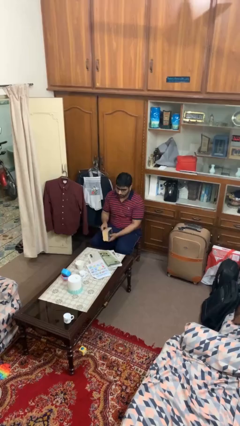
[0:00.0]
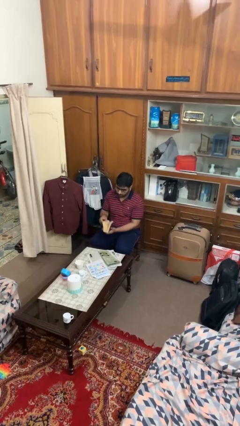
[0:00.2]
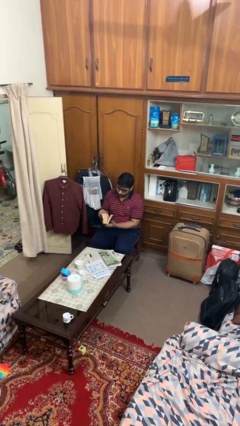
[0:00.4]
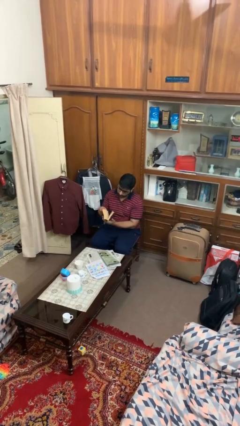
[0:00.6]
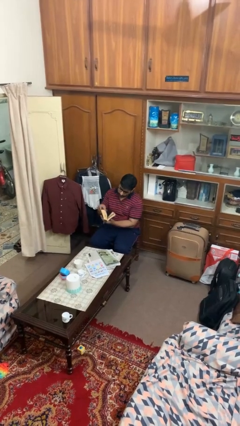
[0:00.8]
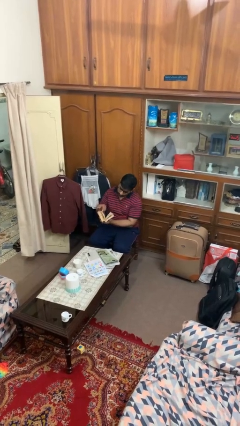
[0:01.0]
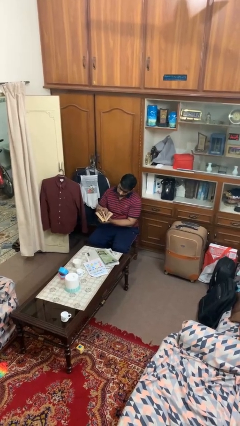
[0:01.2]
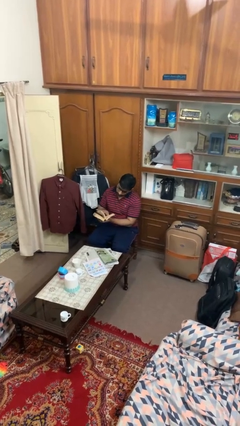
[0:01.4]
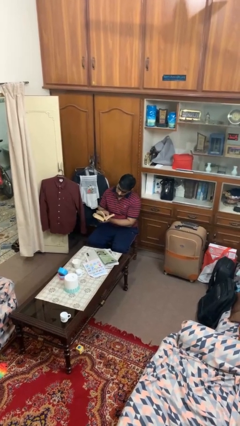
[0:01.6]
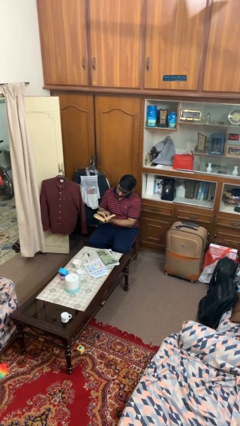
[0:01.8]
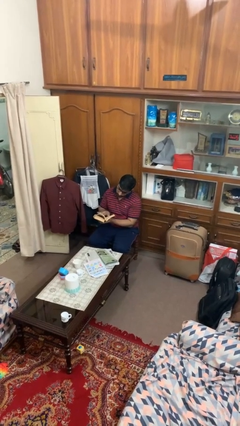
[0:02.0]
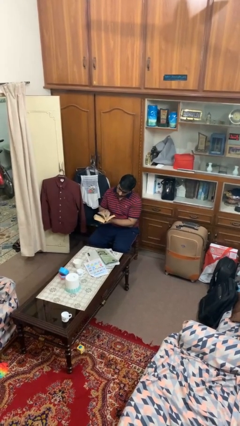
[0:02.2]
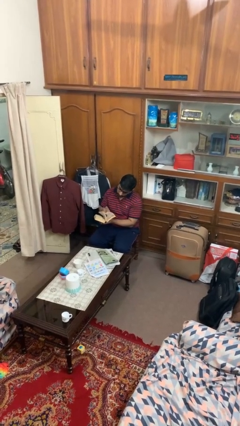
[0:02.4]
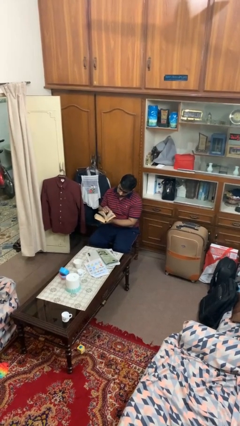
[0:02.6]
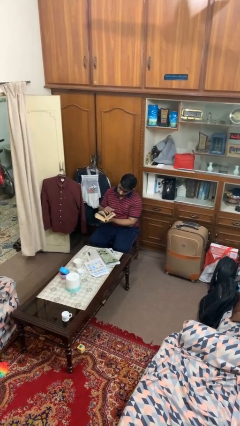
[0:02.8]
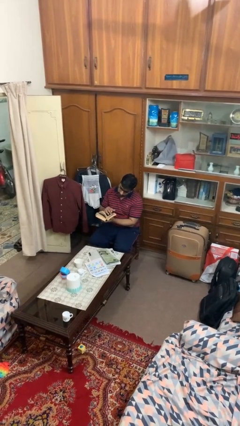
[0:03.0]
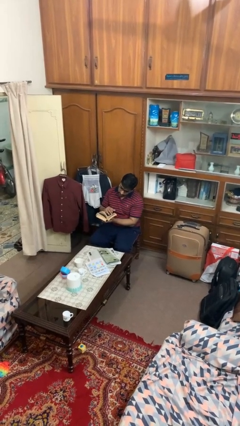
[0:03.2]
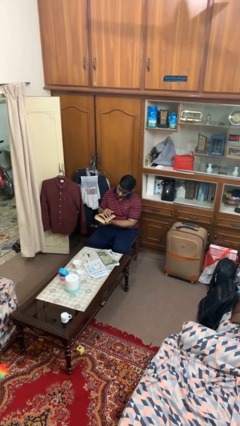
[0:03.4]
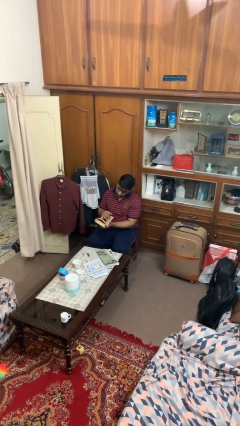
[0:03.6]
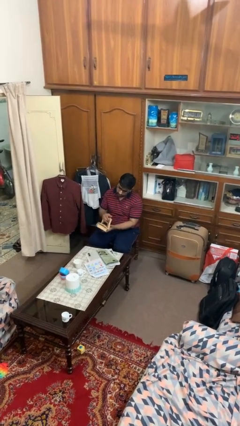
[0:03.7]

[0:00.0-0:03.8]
person reads book

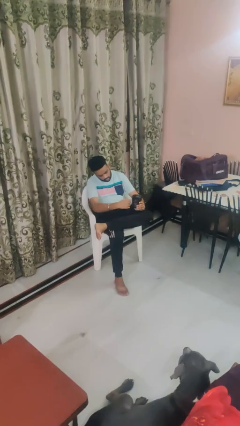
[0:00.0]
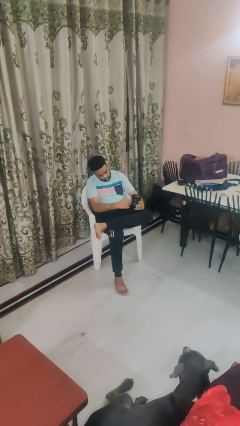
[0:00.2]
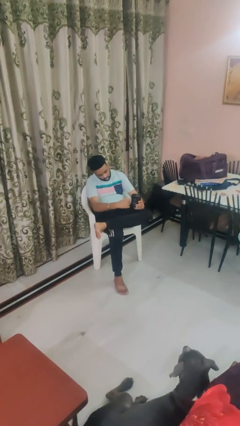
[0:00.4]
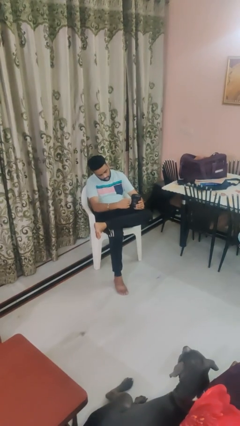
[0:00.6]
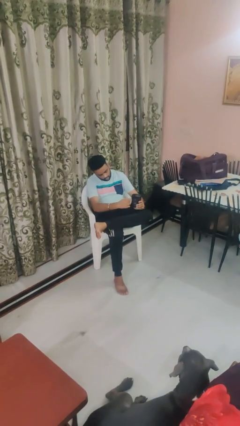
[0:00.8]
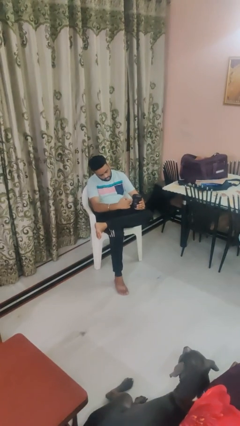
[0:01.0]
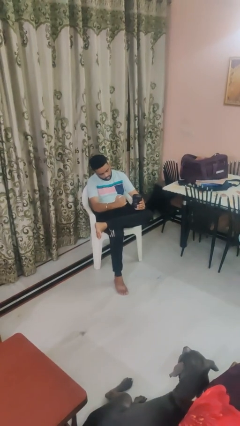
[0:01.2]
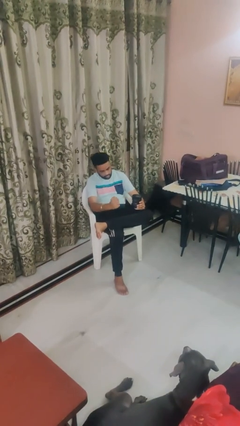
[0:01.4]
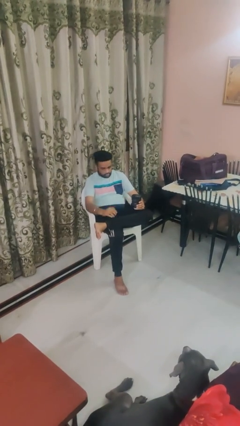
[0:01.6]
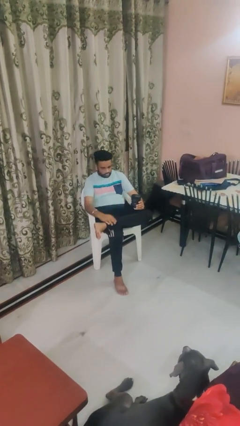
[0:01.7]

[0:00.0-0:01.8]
person taps object with finger

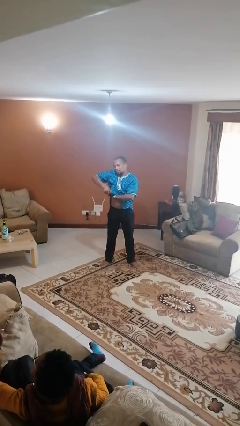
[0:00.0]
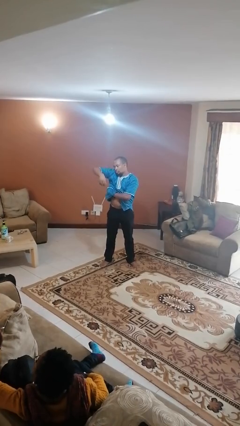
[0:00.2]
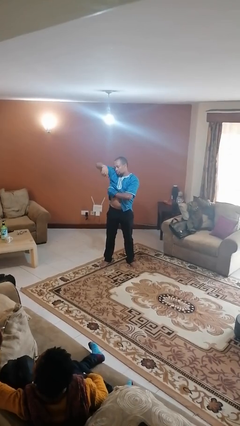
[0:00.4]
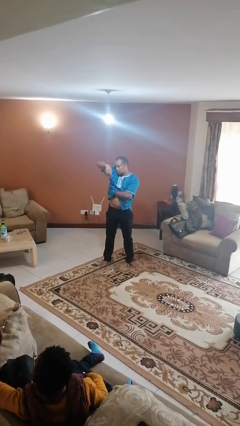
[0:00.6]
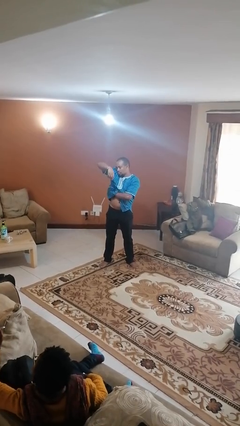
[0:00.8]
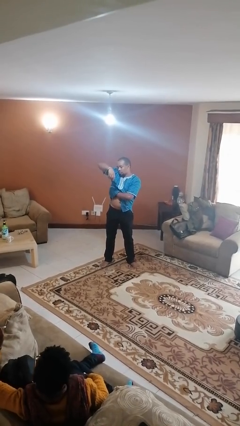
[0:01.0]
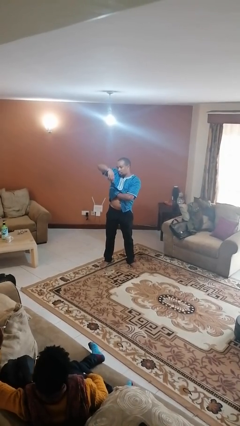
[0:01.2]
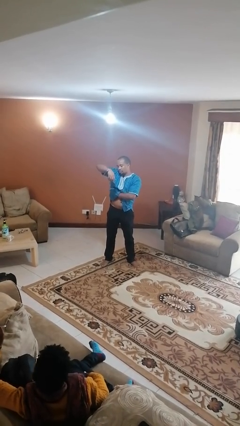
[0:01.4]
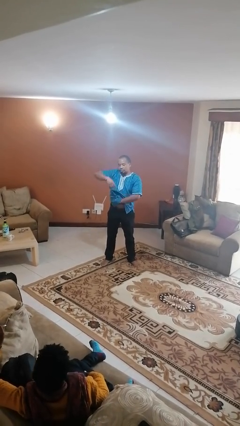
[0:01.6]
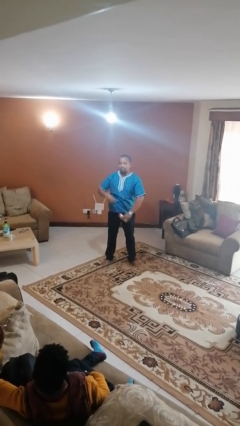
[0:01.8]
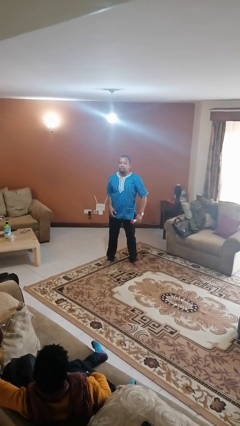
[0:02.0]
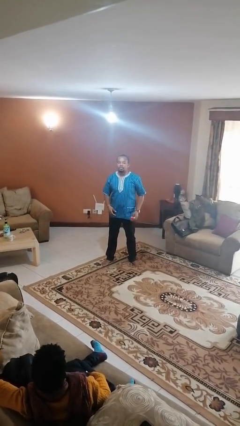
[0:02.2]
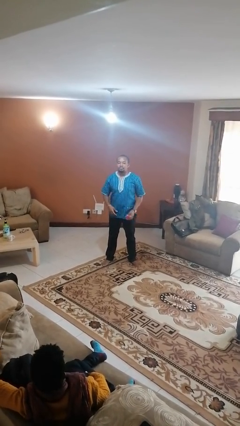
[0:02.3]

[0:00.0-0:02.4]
person applies deodorant

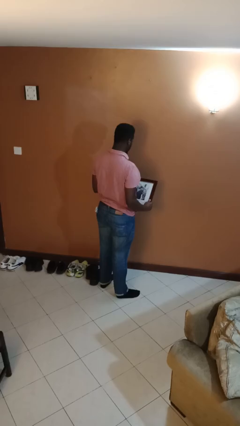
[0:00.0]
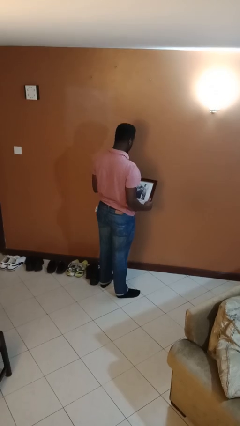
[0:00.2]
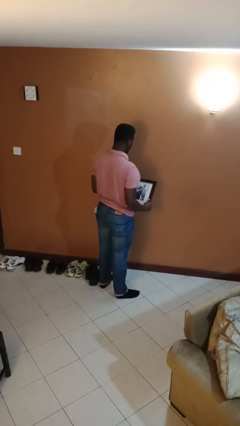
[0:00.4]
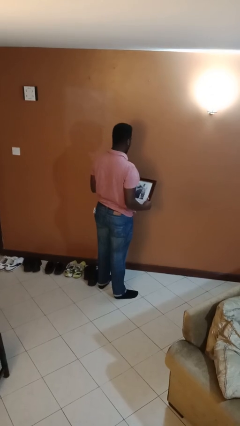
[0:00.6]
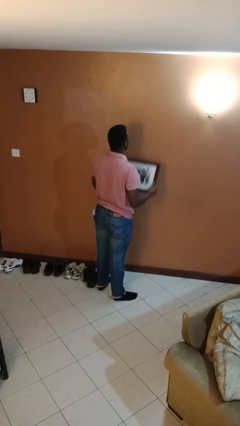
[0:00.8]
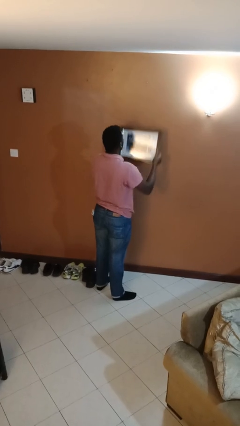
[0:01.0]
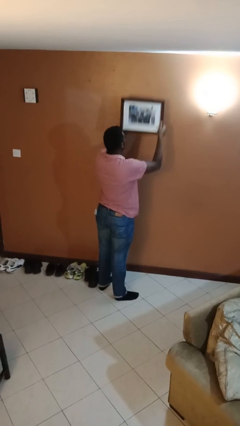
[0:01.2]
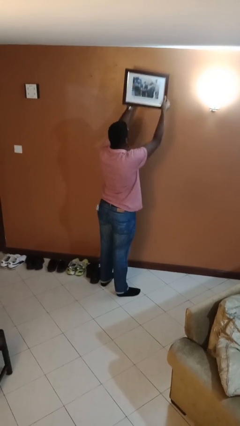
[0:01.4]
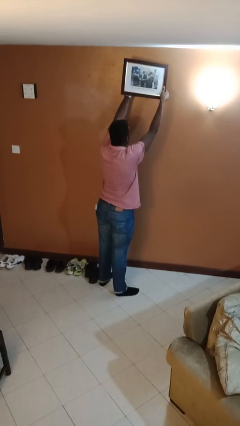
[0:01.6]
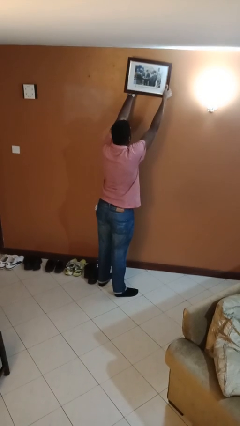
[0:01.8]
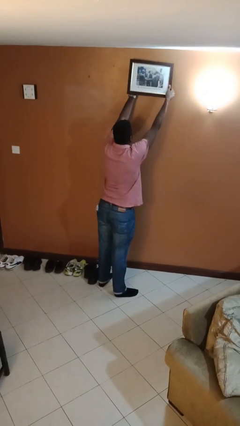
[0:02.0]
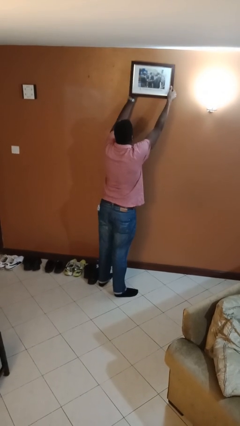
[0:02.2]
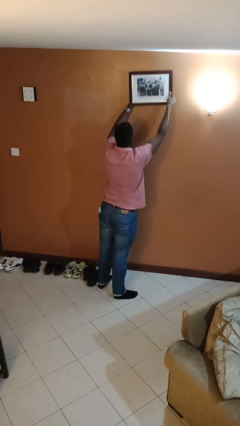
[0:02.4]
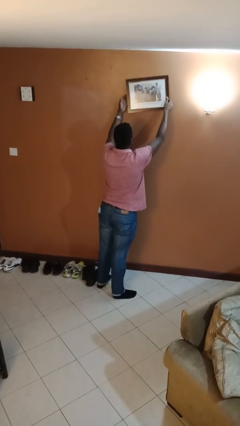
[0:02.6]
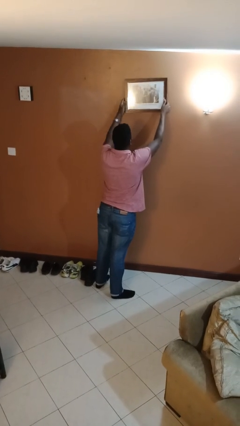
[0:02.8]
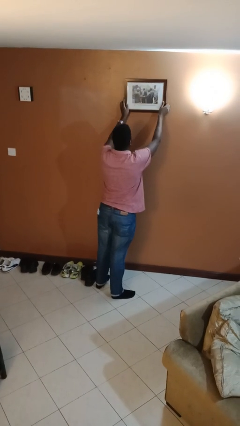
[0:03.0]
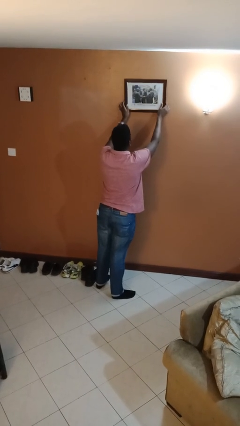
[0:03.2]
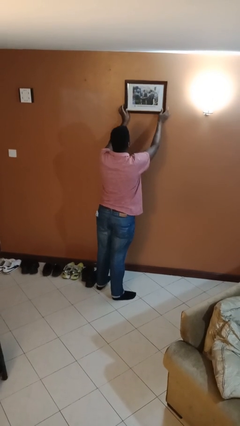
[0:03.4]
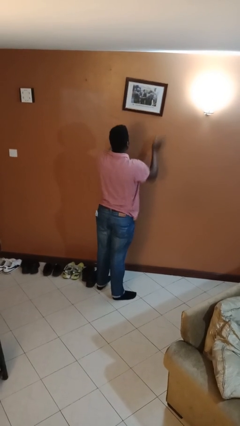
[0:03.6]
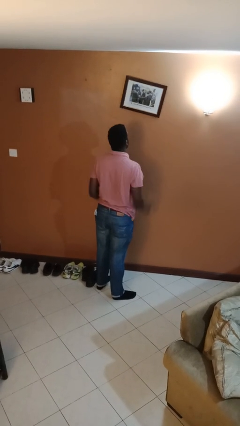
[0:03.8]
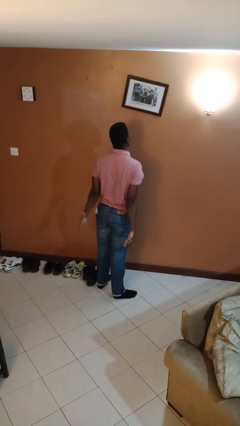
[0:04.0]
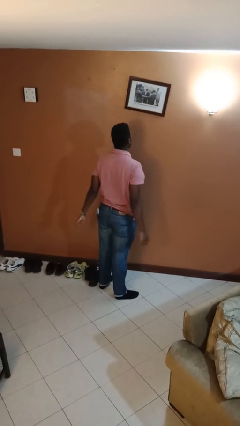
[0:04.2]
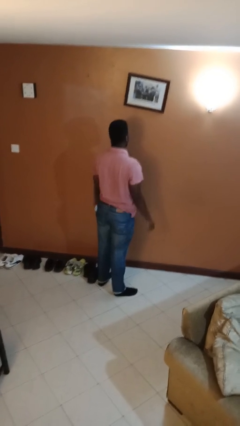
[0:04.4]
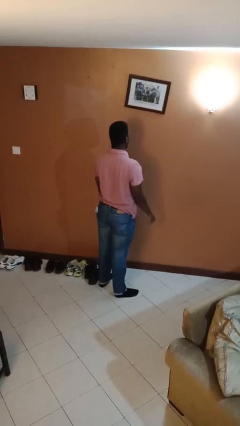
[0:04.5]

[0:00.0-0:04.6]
person puts up picture frame

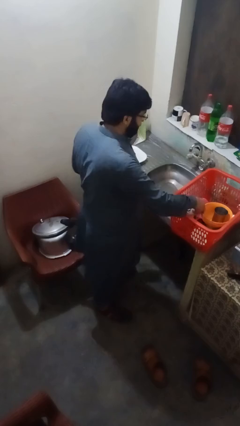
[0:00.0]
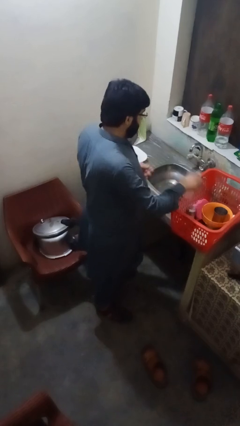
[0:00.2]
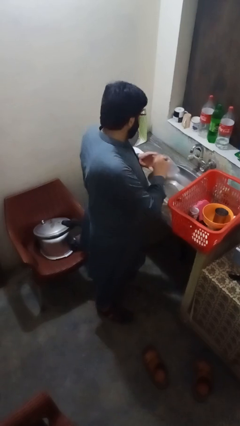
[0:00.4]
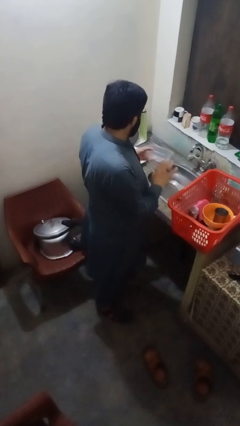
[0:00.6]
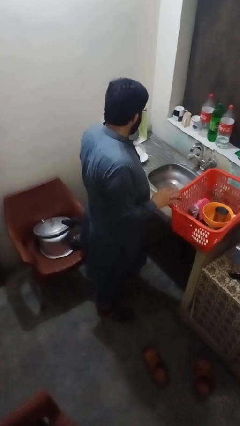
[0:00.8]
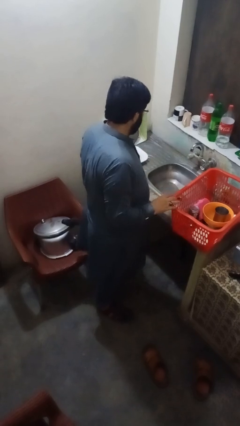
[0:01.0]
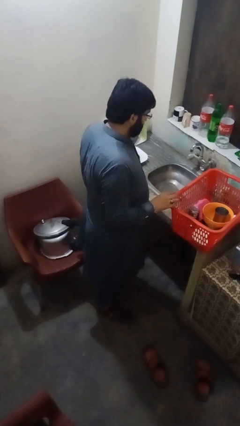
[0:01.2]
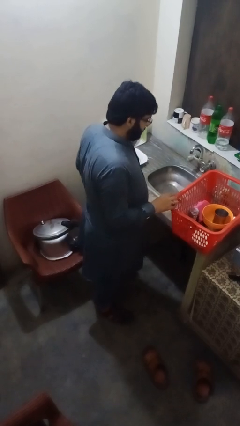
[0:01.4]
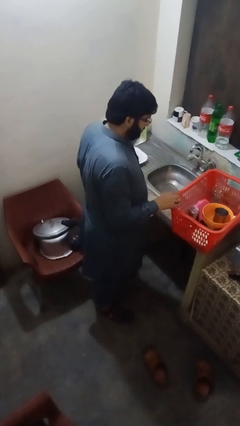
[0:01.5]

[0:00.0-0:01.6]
person unloads dishwasher

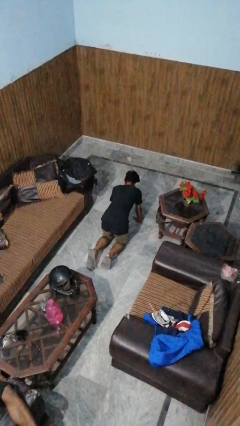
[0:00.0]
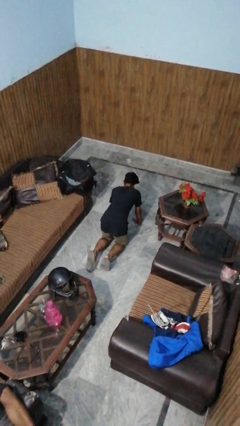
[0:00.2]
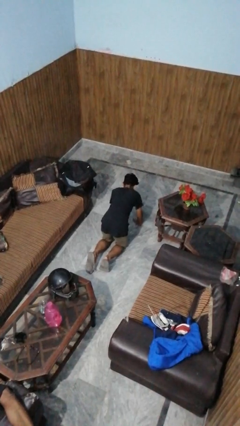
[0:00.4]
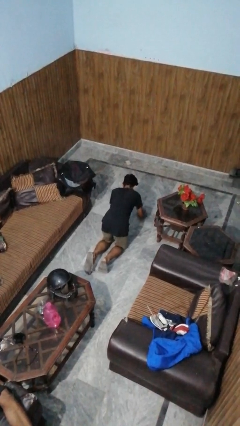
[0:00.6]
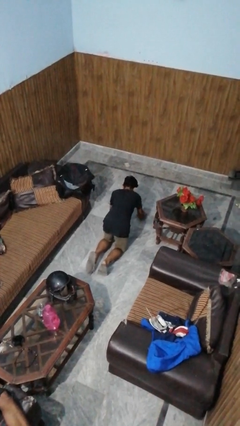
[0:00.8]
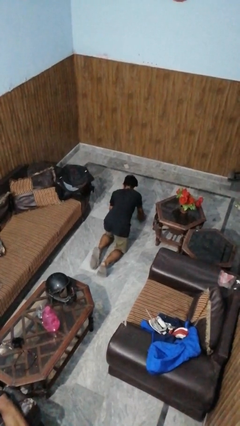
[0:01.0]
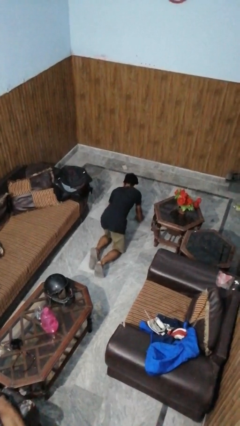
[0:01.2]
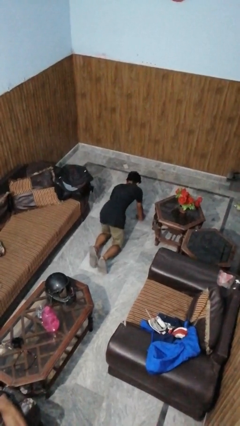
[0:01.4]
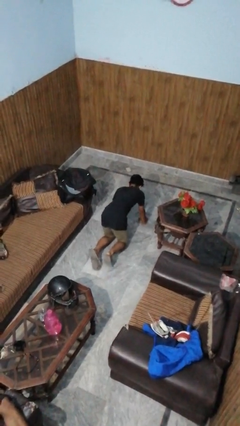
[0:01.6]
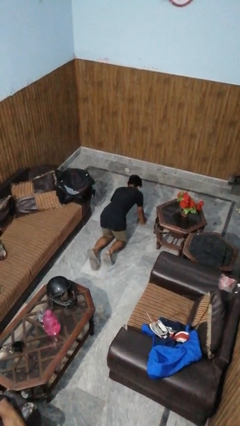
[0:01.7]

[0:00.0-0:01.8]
person crawls

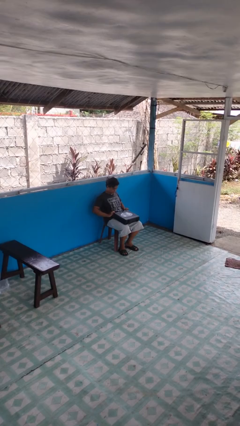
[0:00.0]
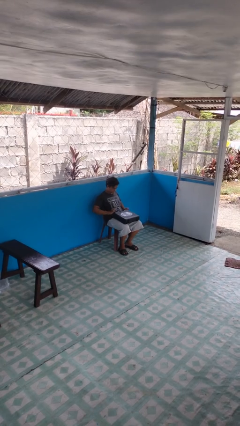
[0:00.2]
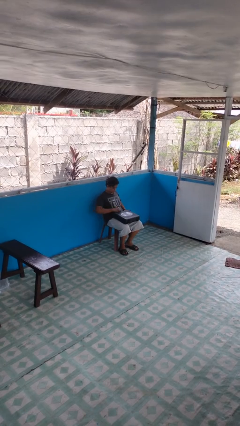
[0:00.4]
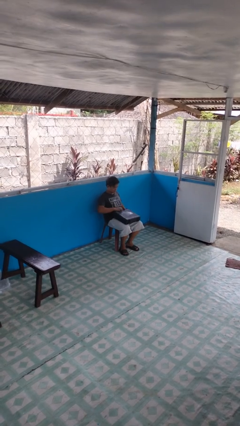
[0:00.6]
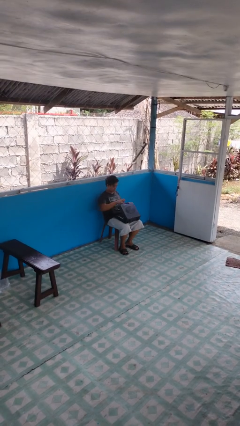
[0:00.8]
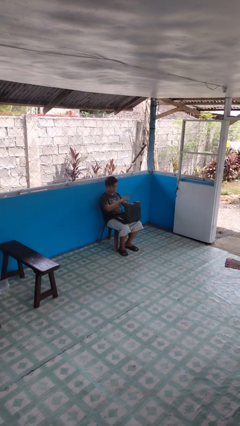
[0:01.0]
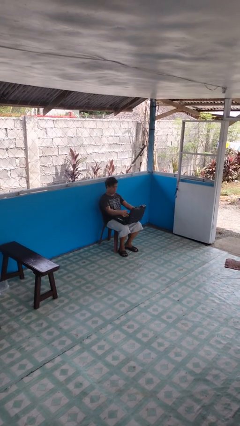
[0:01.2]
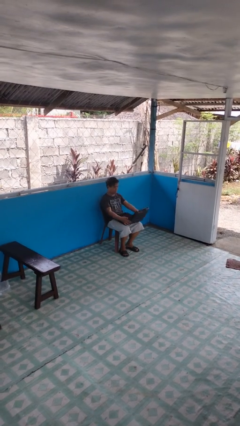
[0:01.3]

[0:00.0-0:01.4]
person opens suitcase
